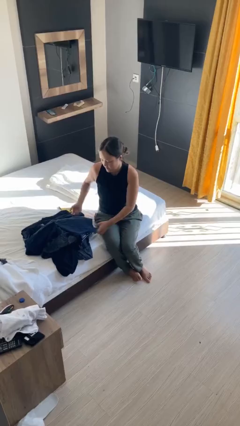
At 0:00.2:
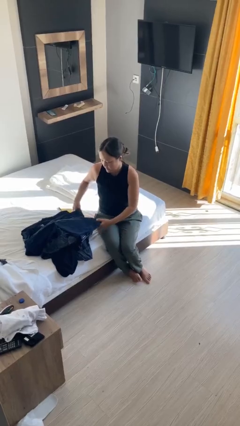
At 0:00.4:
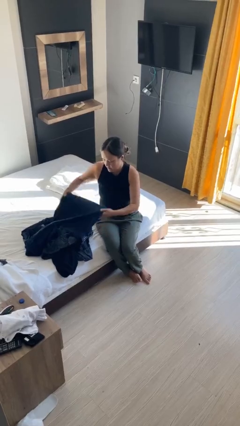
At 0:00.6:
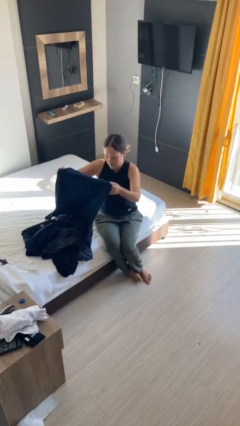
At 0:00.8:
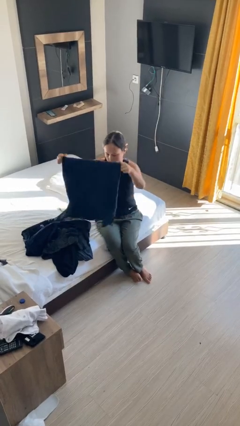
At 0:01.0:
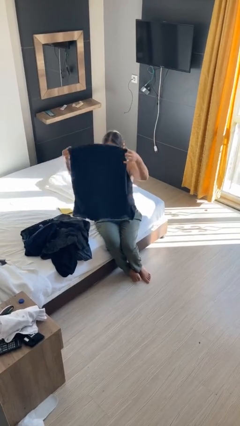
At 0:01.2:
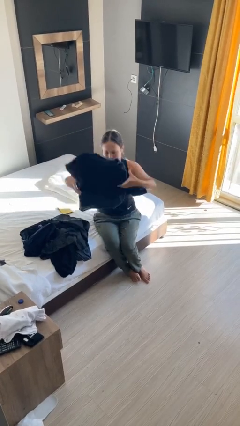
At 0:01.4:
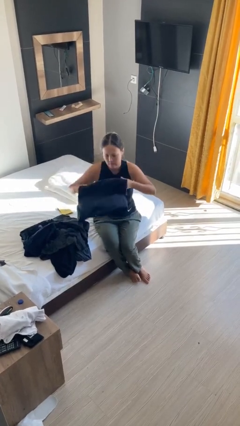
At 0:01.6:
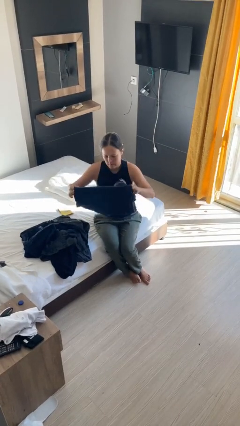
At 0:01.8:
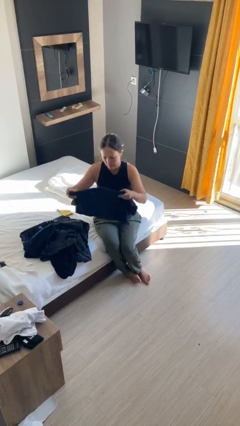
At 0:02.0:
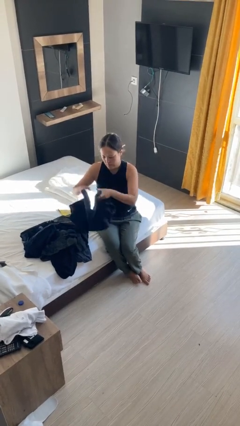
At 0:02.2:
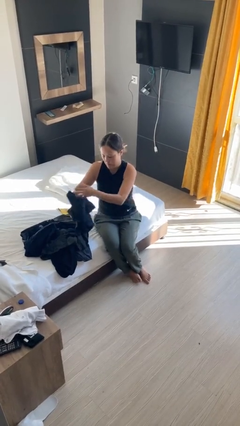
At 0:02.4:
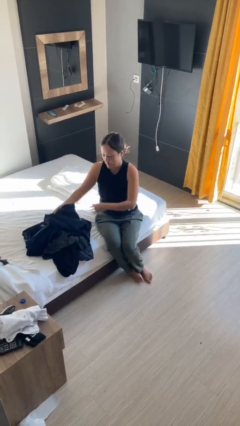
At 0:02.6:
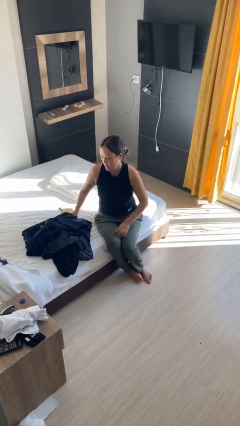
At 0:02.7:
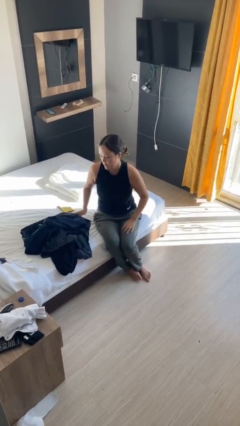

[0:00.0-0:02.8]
person folds shirt

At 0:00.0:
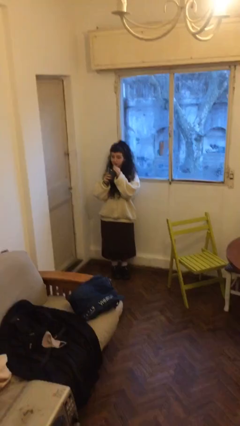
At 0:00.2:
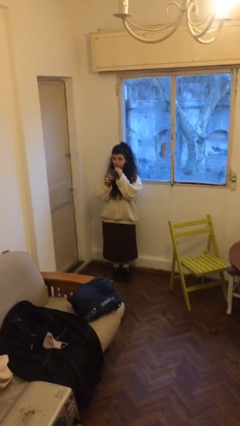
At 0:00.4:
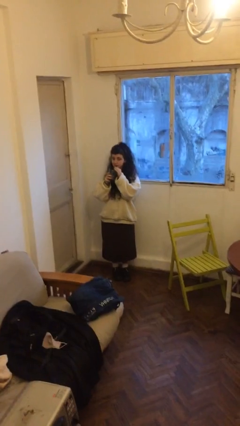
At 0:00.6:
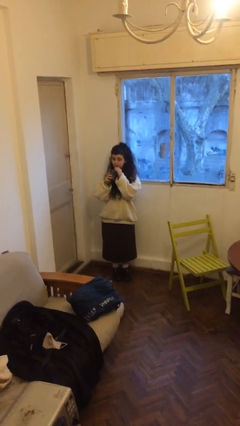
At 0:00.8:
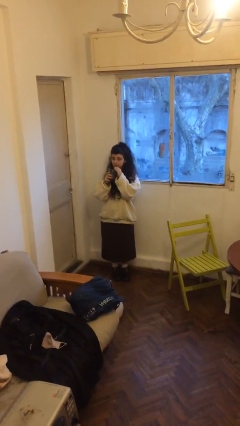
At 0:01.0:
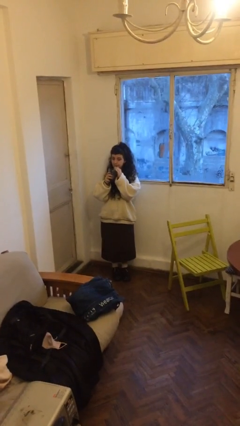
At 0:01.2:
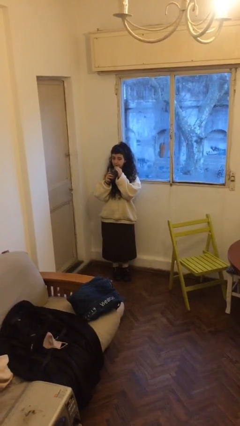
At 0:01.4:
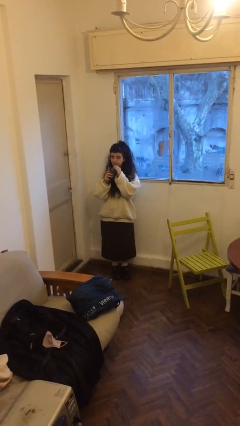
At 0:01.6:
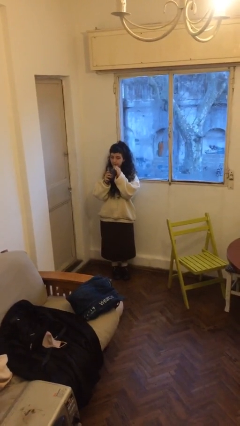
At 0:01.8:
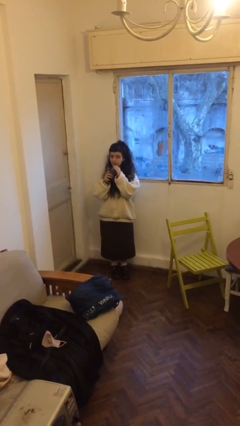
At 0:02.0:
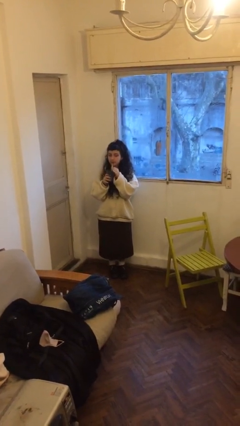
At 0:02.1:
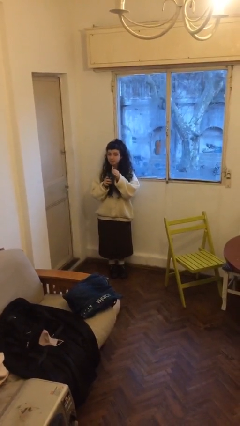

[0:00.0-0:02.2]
person drinks from straw

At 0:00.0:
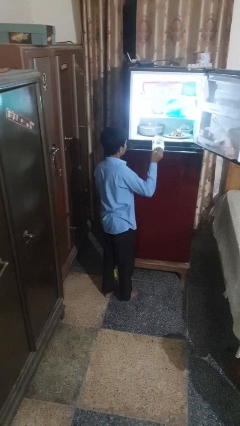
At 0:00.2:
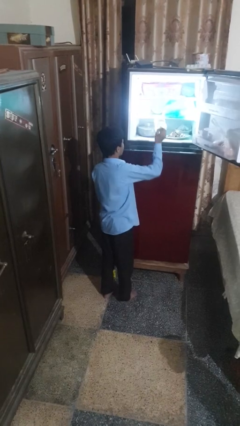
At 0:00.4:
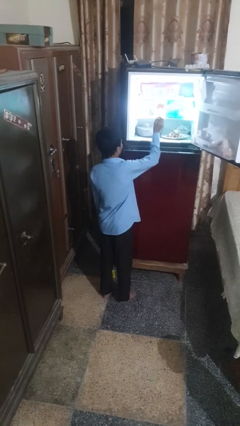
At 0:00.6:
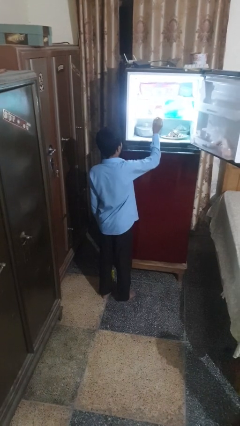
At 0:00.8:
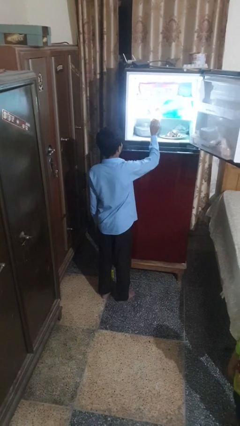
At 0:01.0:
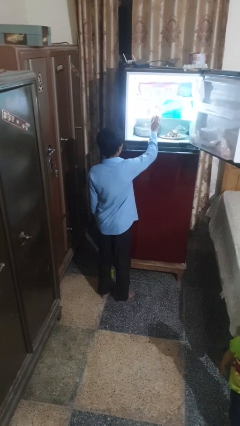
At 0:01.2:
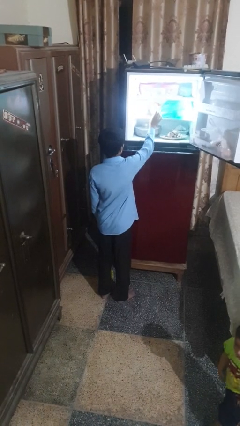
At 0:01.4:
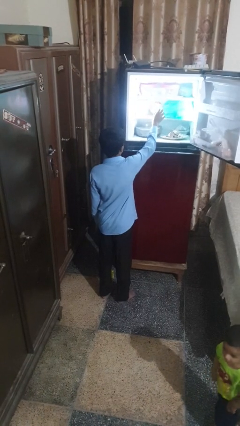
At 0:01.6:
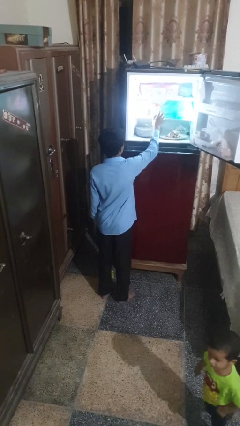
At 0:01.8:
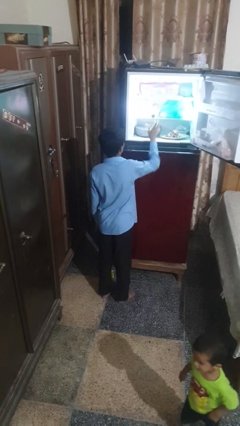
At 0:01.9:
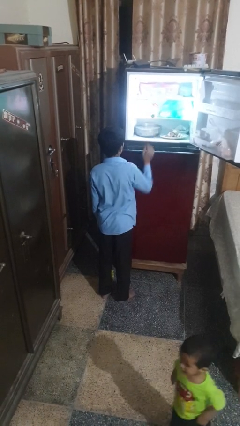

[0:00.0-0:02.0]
person puts object into refrigerator

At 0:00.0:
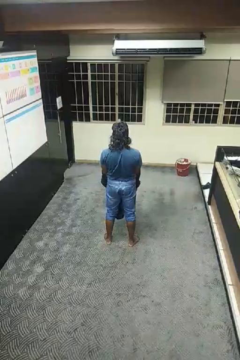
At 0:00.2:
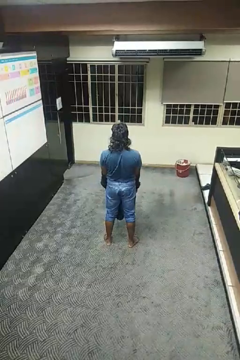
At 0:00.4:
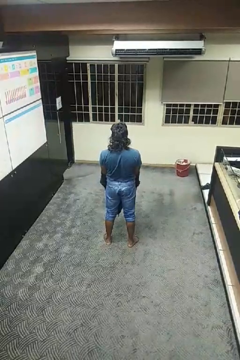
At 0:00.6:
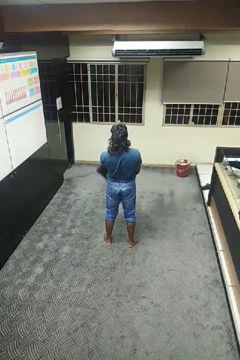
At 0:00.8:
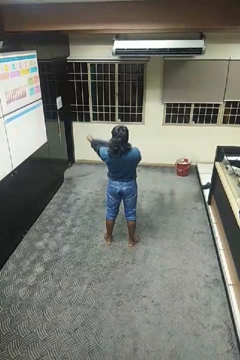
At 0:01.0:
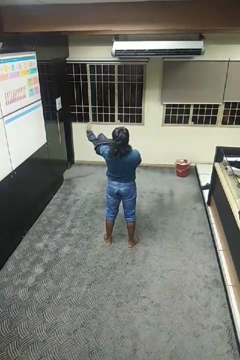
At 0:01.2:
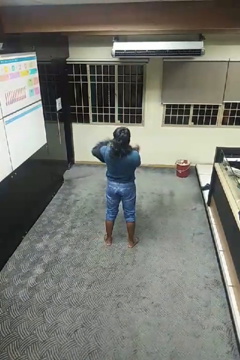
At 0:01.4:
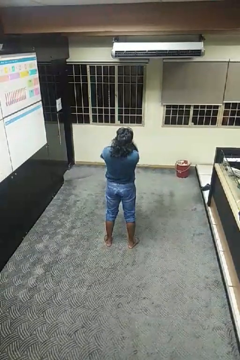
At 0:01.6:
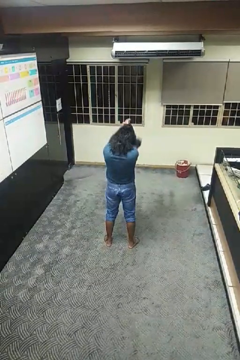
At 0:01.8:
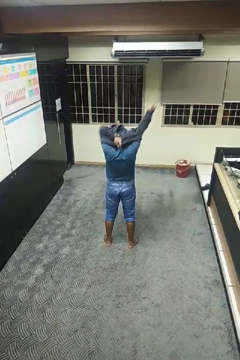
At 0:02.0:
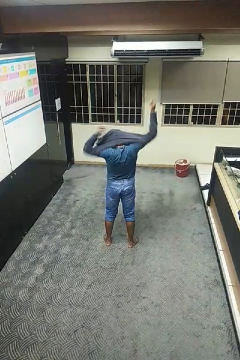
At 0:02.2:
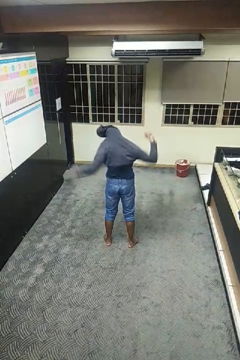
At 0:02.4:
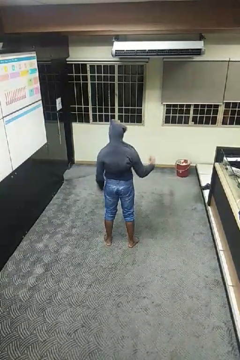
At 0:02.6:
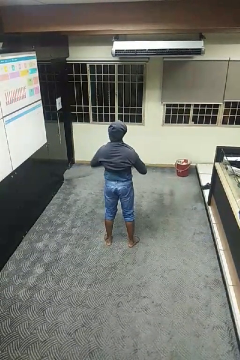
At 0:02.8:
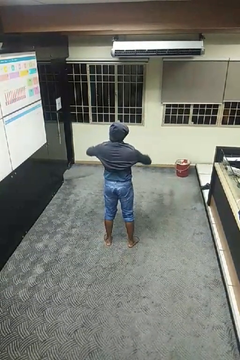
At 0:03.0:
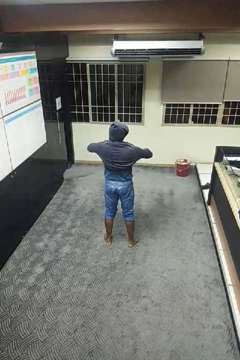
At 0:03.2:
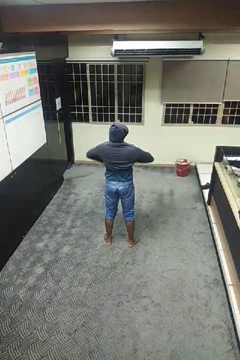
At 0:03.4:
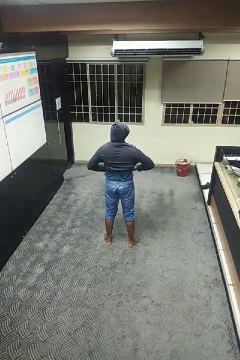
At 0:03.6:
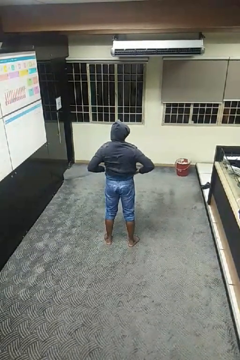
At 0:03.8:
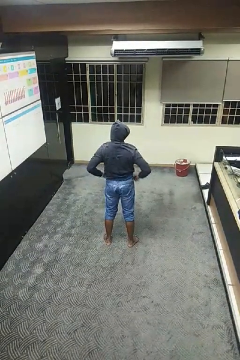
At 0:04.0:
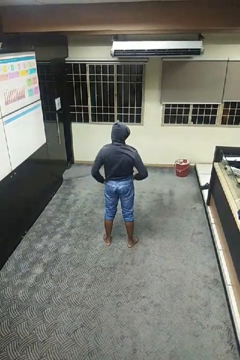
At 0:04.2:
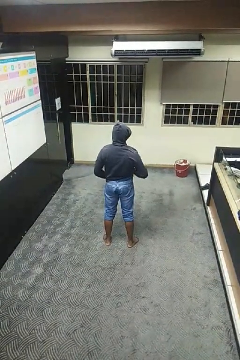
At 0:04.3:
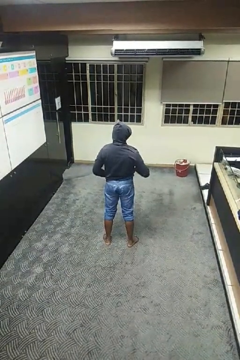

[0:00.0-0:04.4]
person puts on hoodie

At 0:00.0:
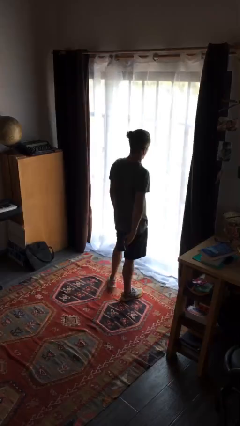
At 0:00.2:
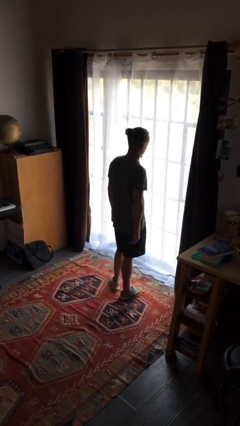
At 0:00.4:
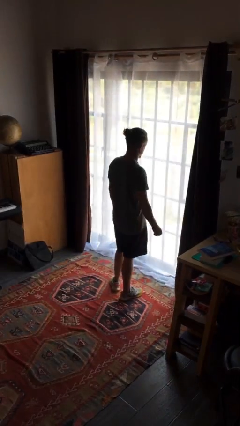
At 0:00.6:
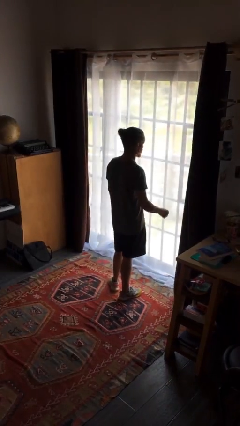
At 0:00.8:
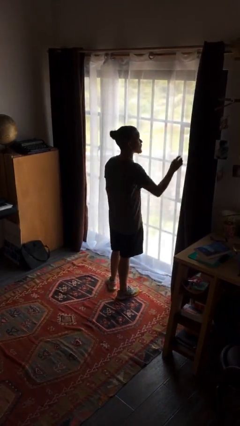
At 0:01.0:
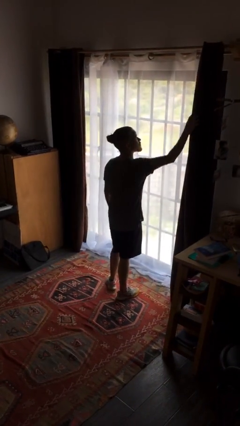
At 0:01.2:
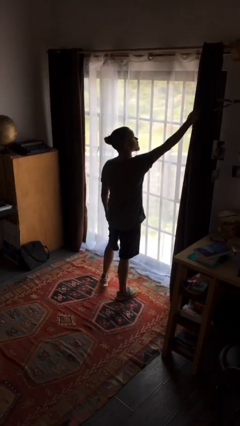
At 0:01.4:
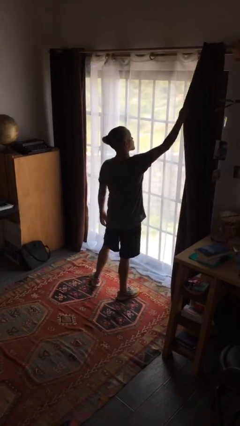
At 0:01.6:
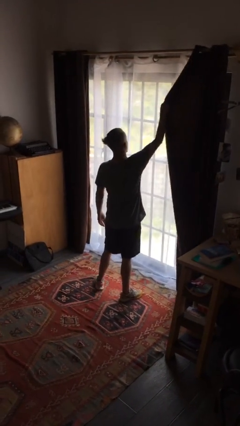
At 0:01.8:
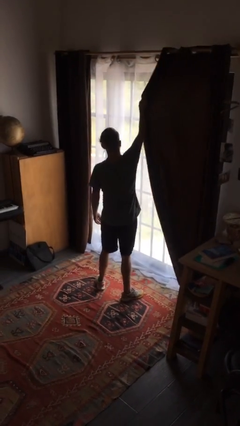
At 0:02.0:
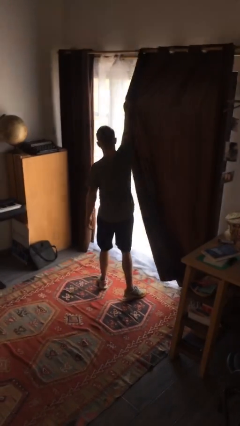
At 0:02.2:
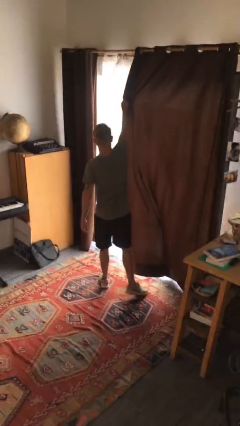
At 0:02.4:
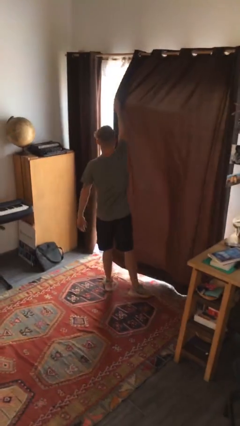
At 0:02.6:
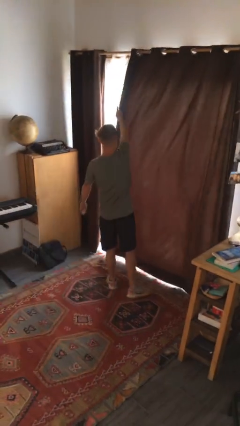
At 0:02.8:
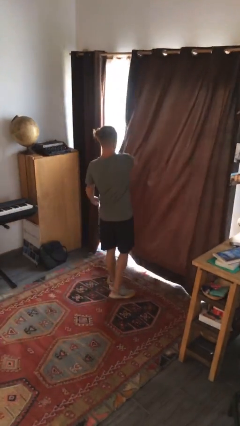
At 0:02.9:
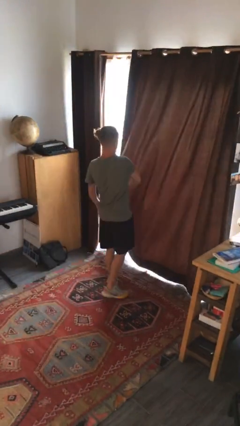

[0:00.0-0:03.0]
person closes curtains

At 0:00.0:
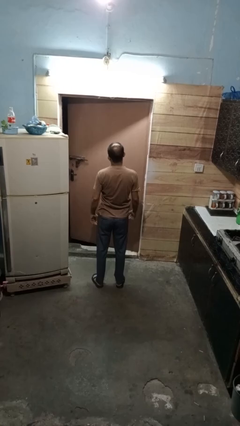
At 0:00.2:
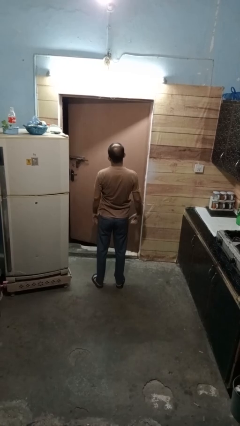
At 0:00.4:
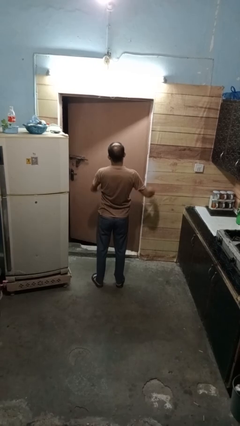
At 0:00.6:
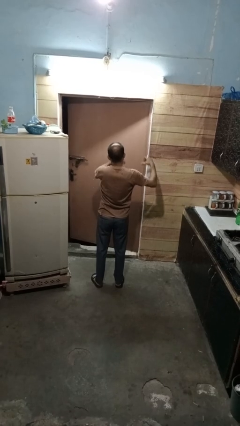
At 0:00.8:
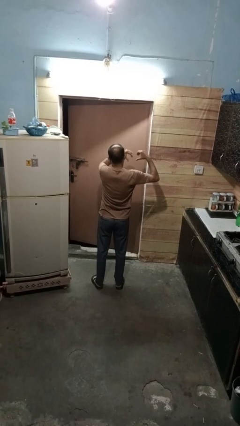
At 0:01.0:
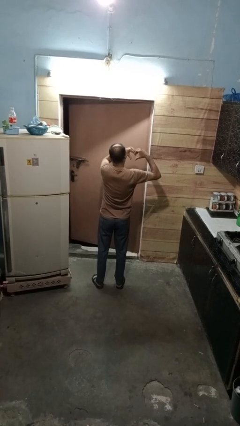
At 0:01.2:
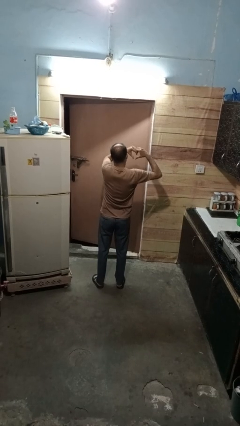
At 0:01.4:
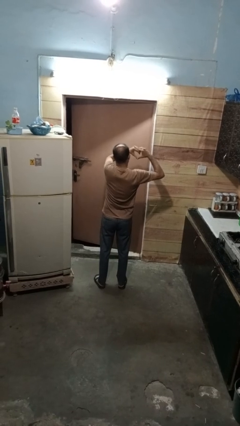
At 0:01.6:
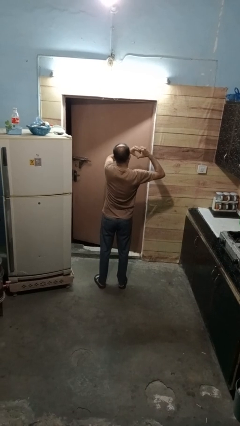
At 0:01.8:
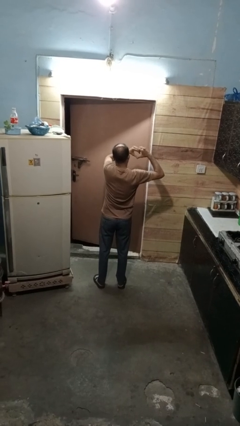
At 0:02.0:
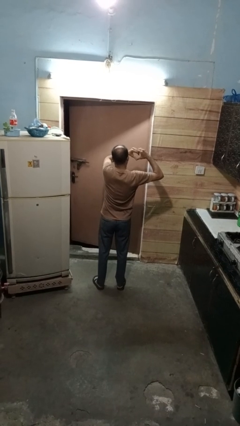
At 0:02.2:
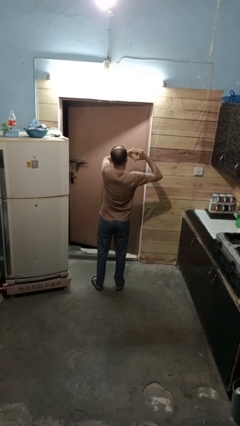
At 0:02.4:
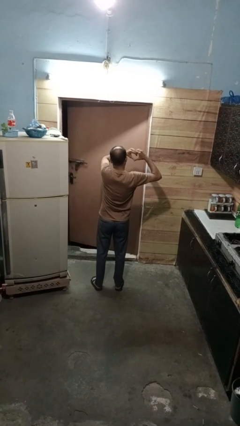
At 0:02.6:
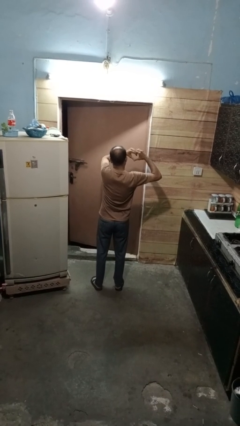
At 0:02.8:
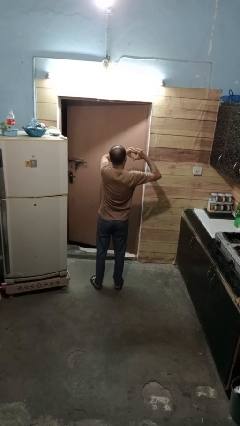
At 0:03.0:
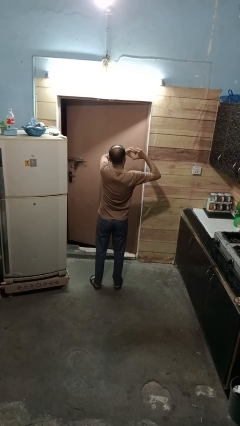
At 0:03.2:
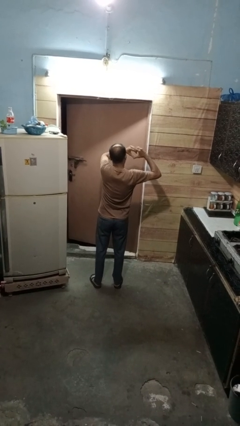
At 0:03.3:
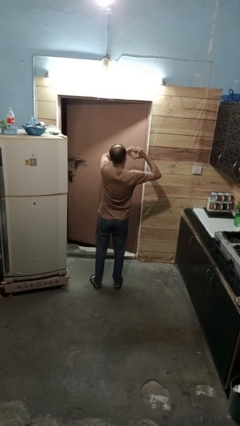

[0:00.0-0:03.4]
person gestures heart

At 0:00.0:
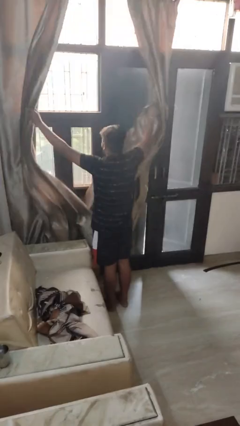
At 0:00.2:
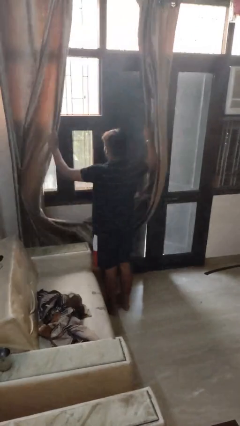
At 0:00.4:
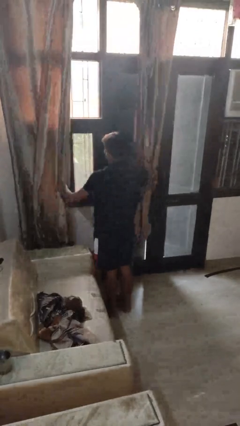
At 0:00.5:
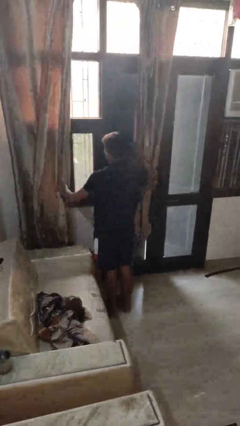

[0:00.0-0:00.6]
person opens curtains
